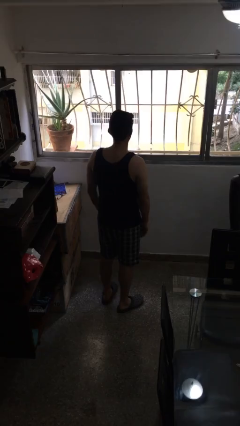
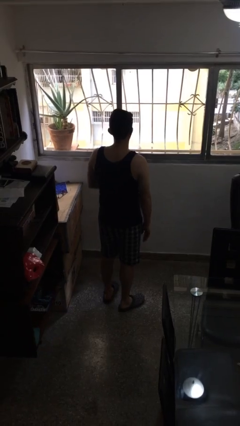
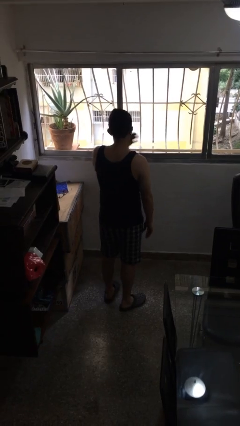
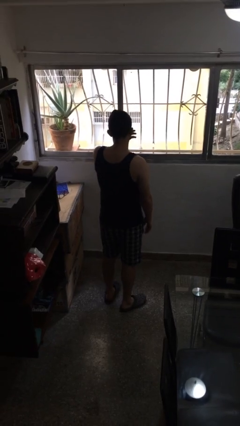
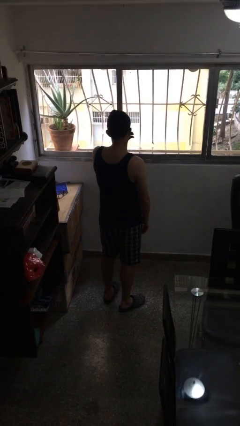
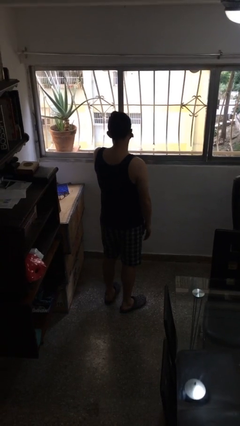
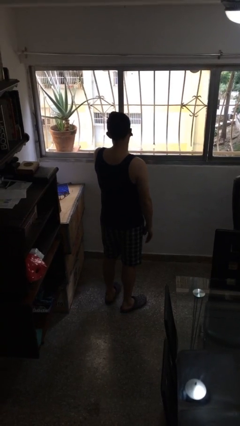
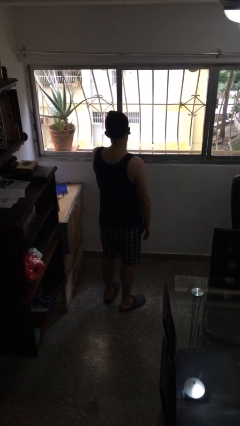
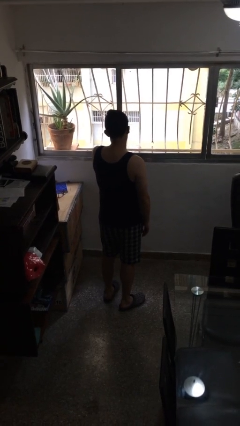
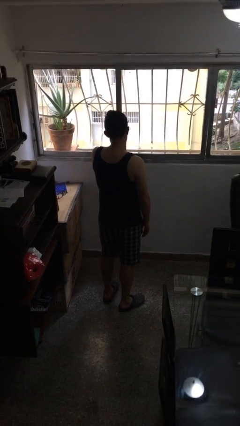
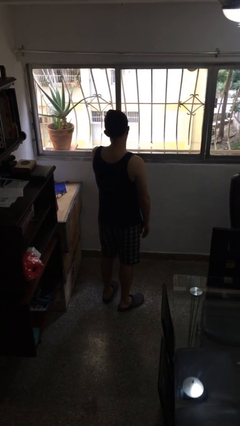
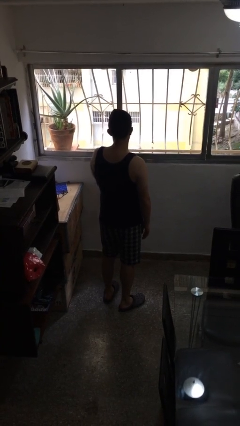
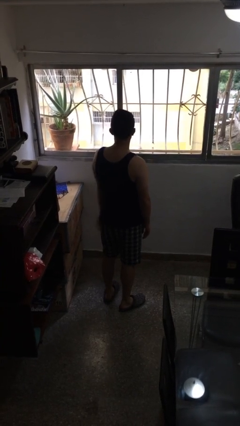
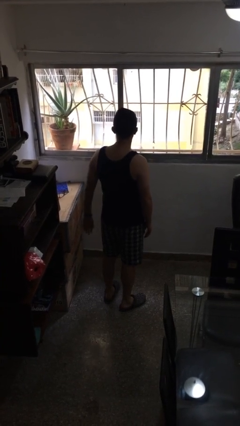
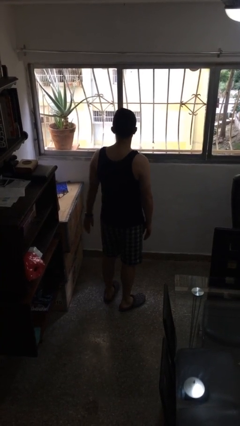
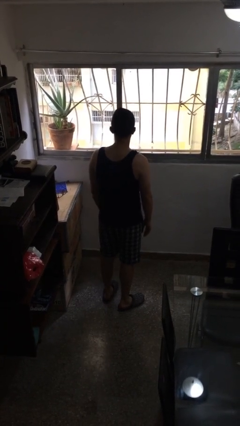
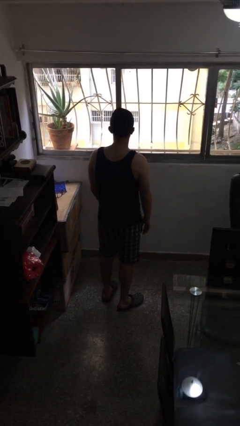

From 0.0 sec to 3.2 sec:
person rubs eyes

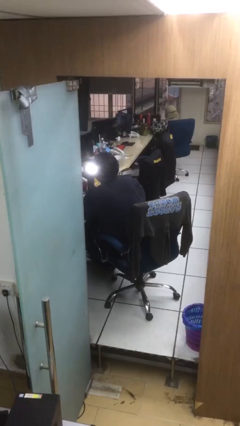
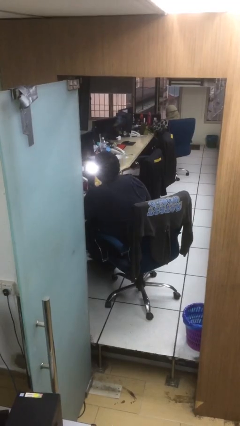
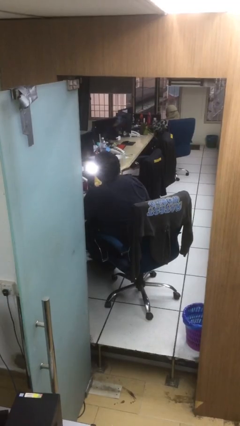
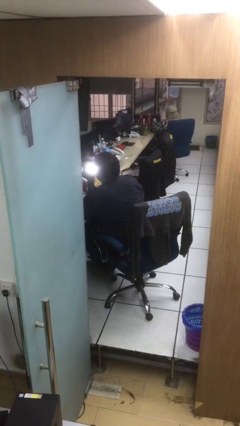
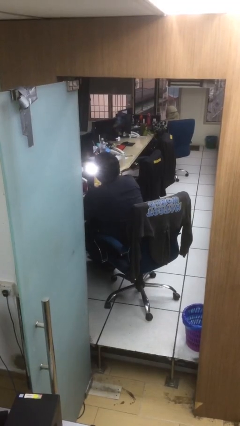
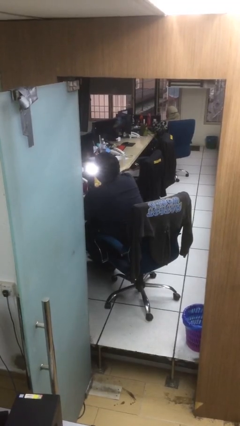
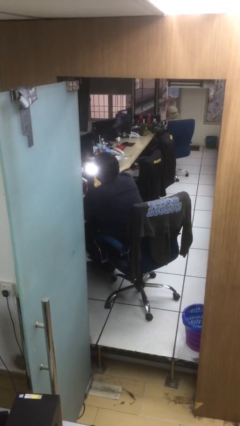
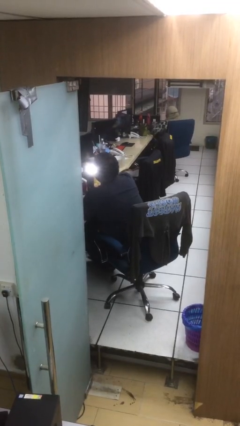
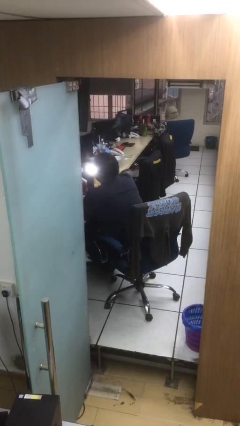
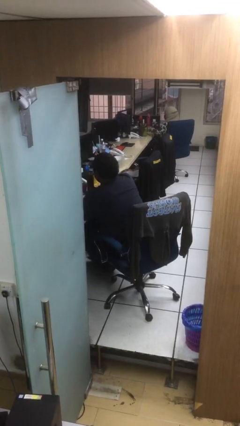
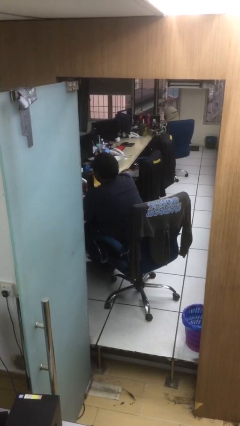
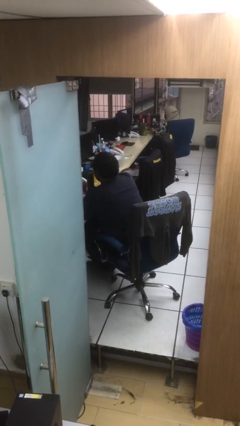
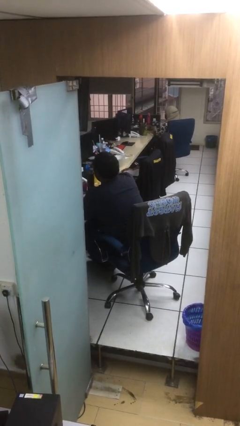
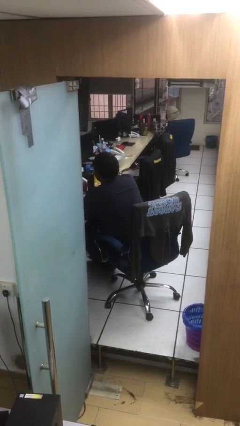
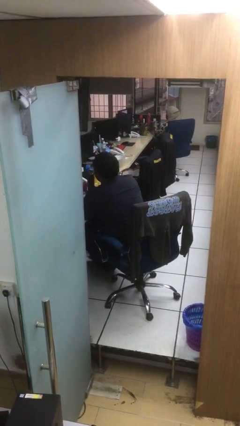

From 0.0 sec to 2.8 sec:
person turns off lamp

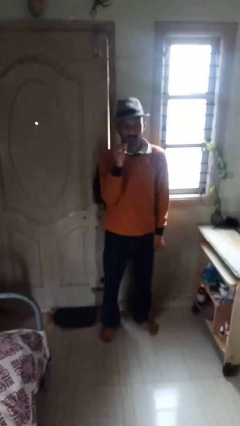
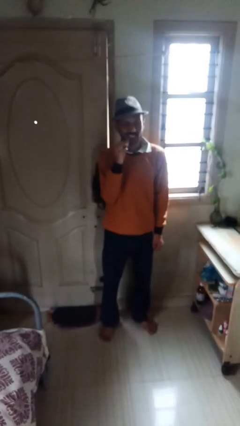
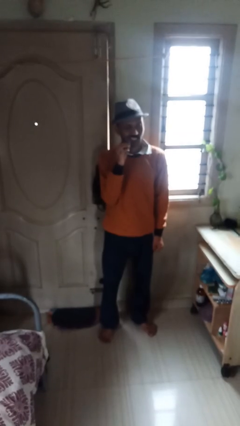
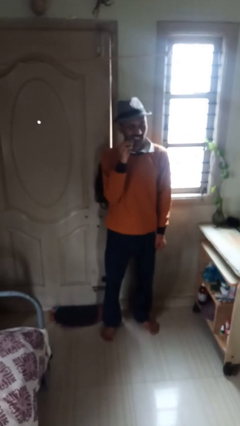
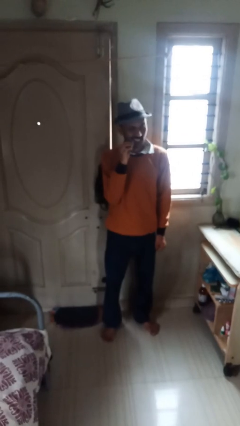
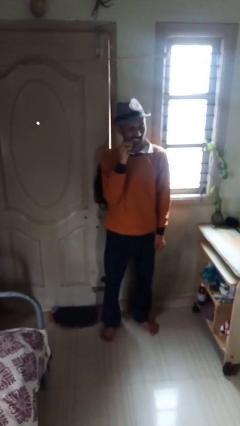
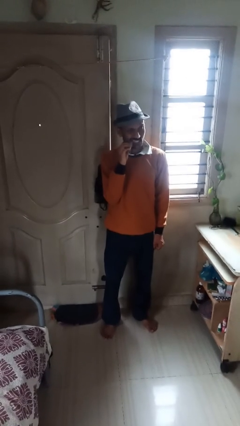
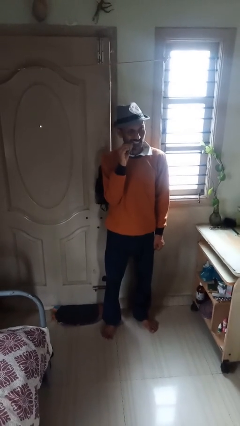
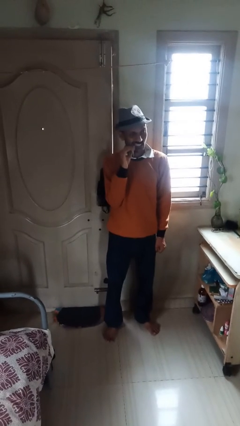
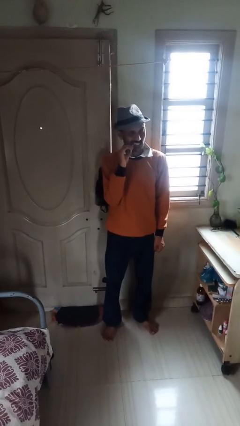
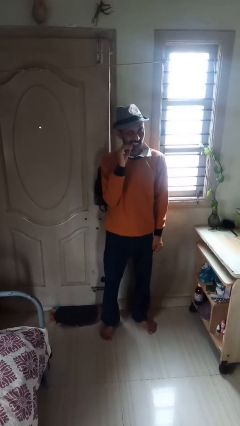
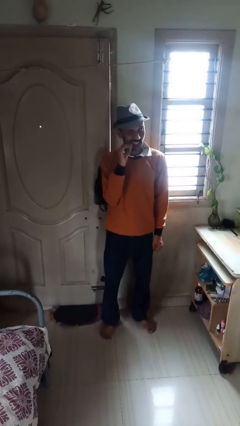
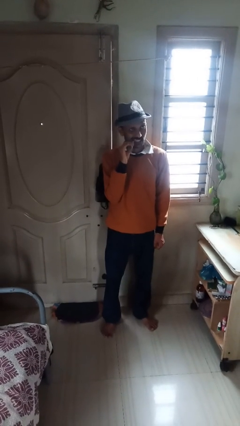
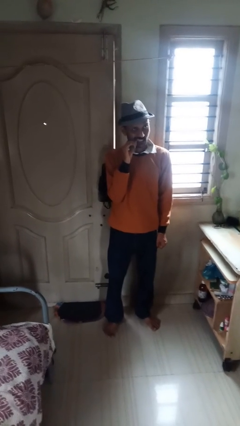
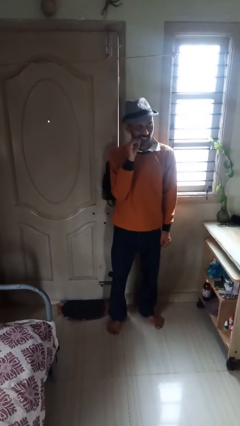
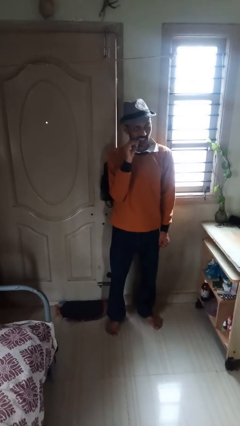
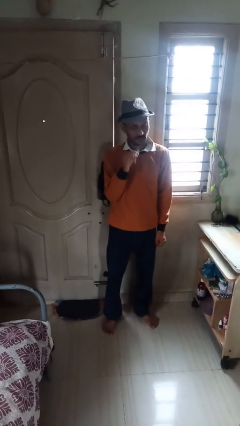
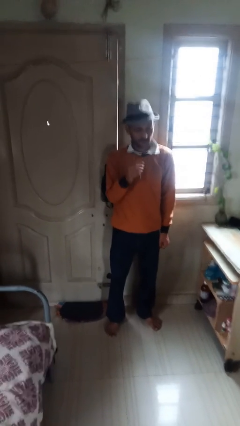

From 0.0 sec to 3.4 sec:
person flosses

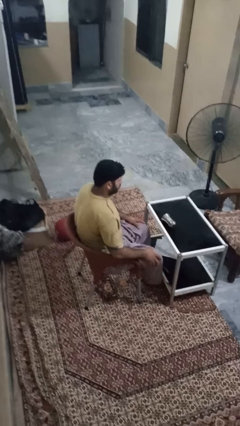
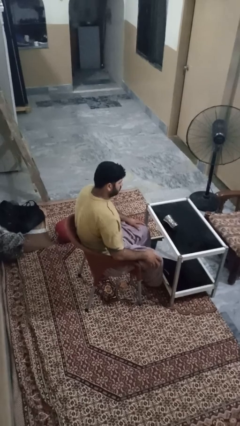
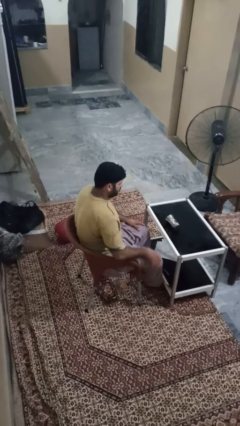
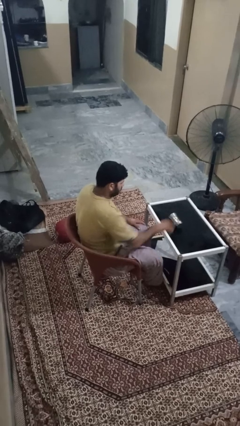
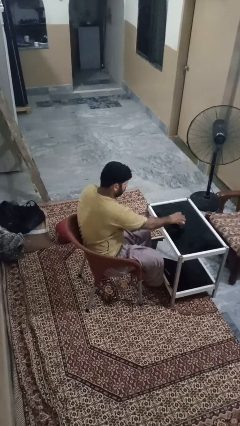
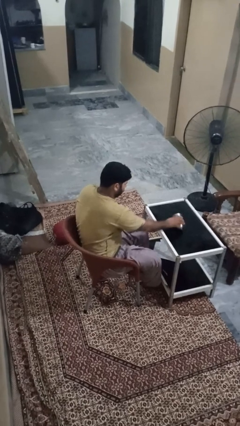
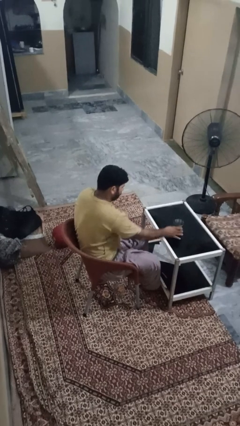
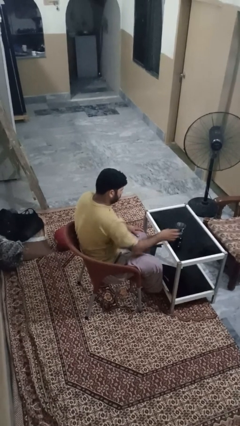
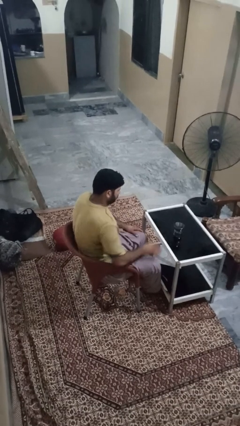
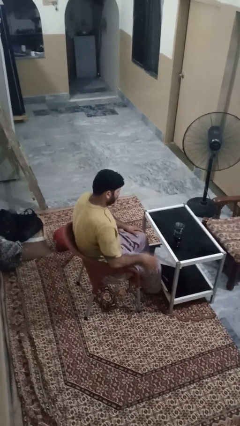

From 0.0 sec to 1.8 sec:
person sets upright glass

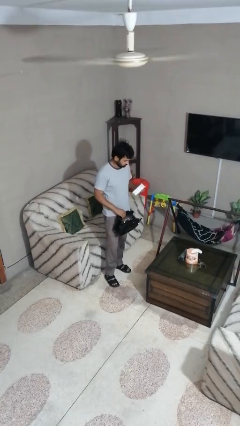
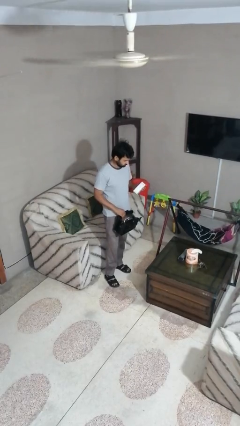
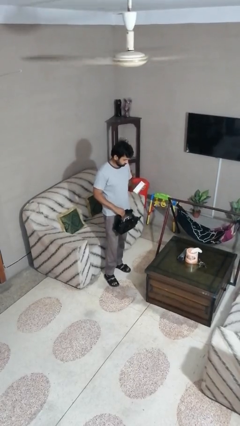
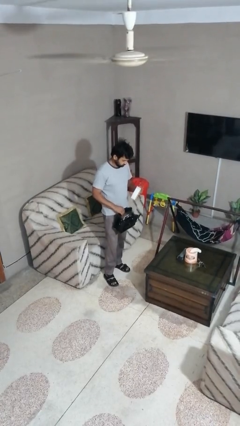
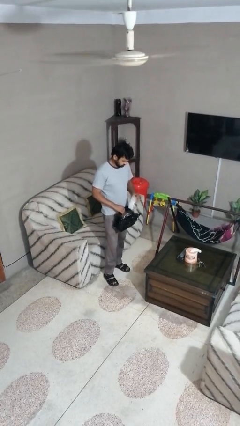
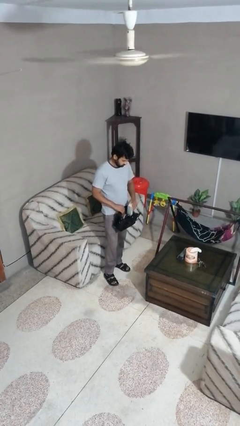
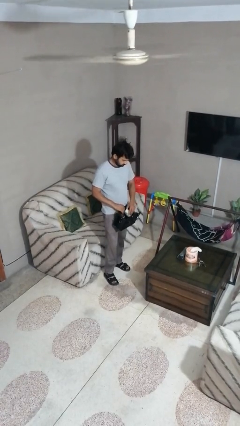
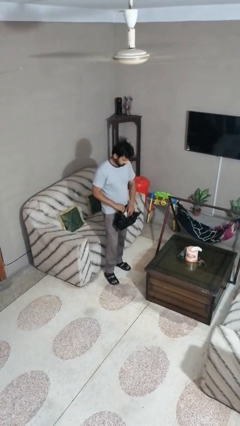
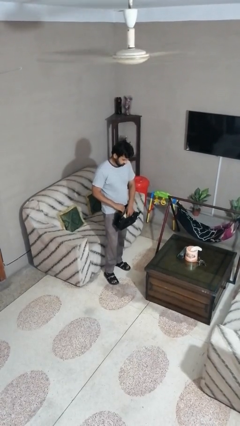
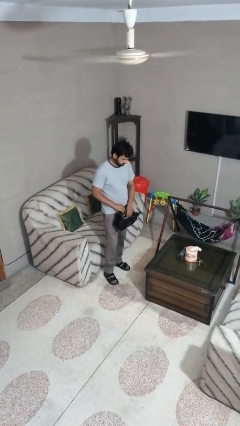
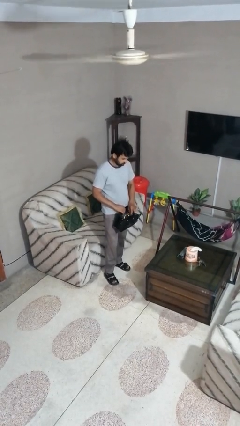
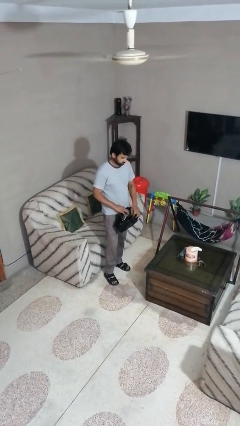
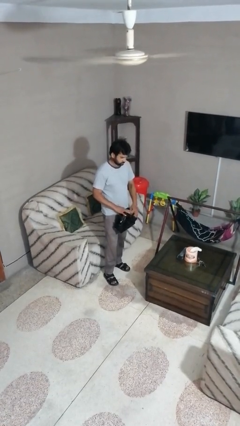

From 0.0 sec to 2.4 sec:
person puts object into purse

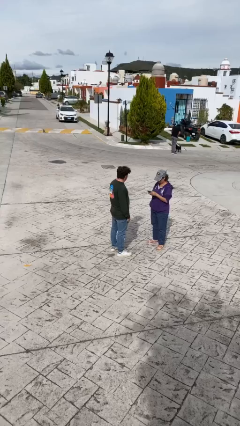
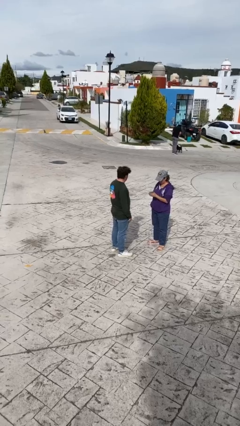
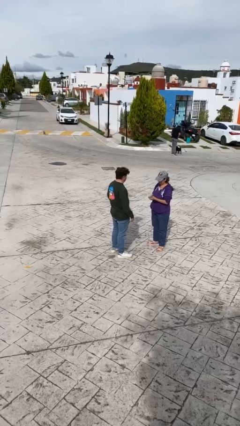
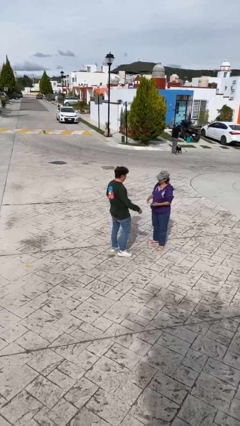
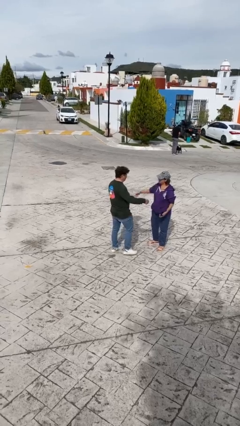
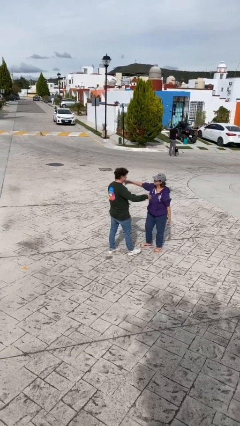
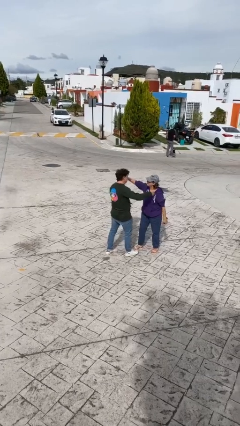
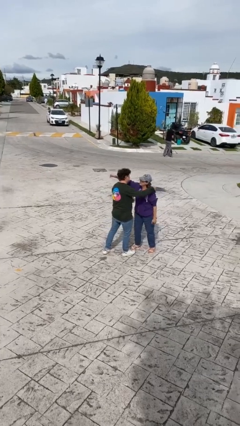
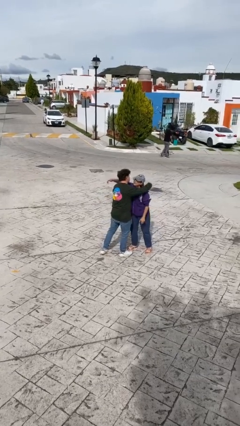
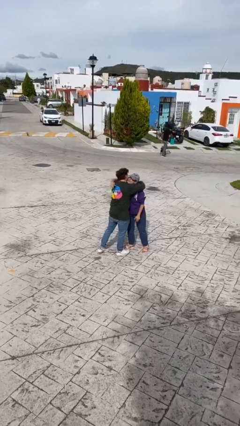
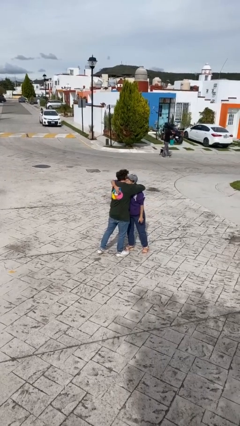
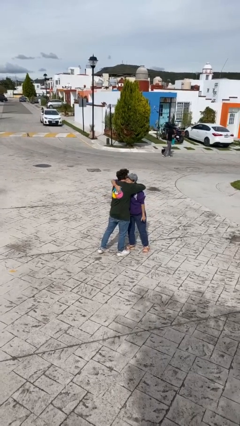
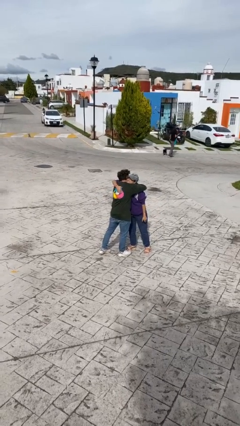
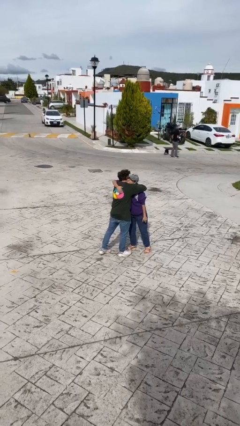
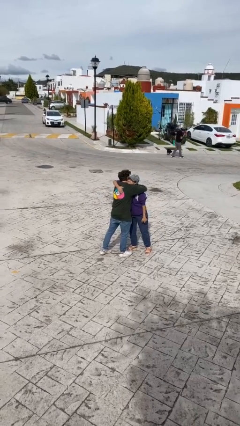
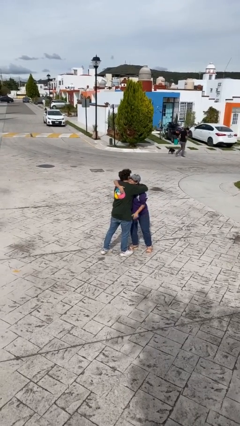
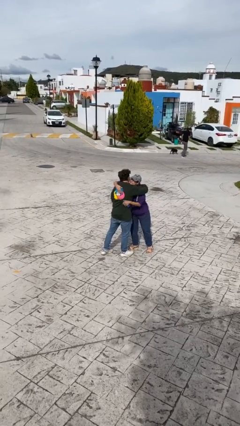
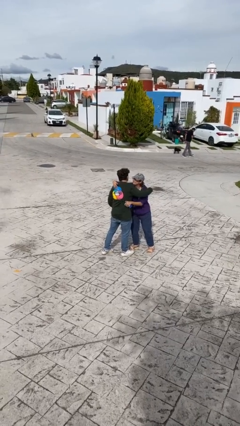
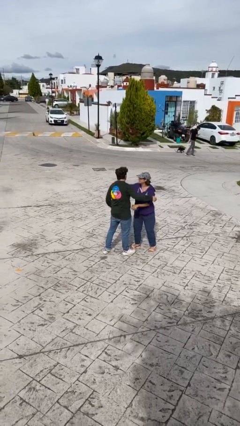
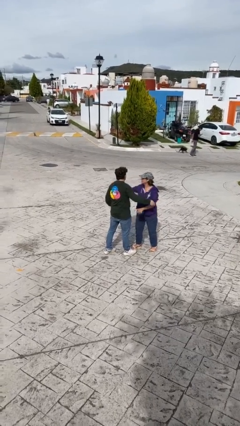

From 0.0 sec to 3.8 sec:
person embraces person

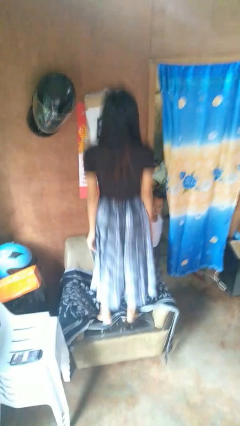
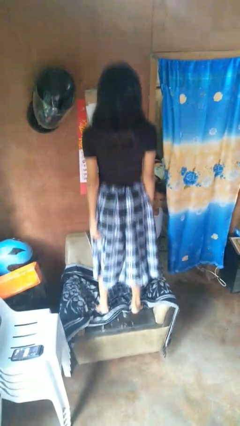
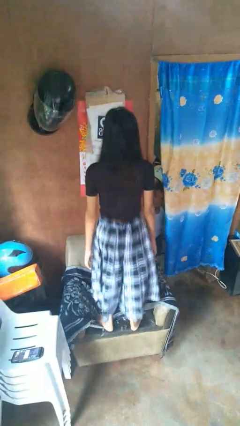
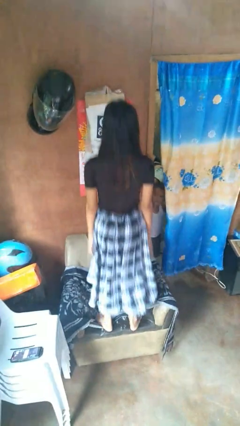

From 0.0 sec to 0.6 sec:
person jumps on couch
